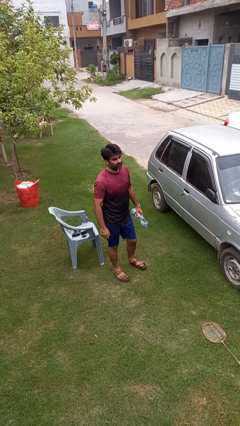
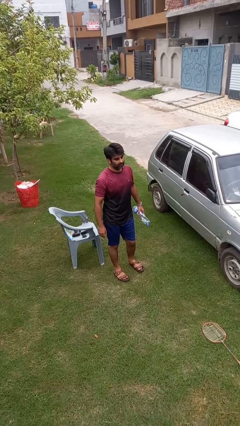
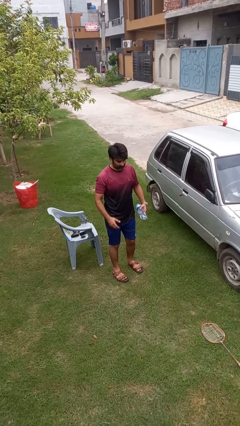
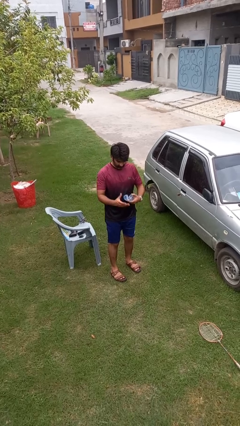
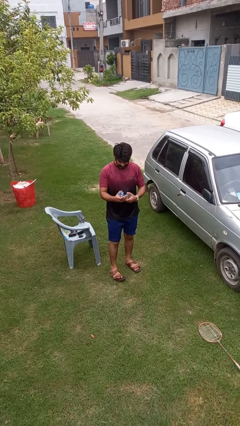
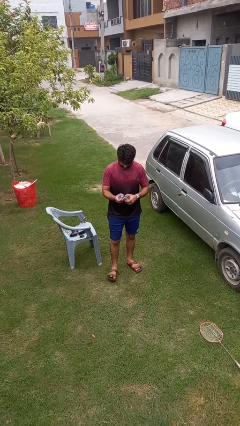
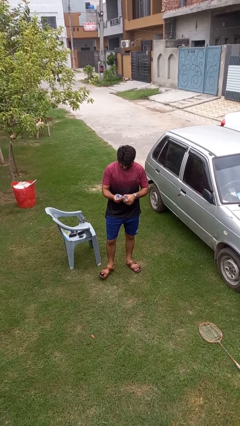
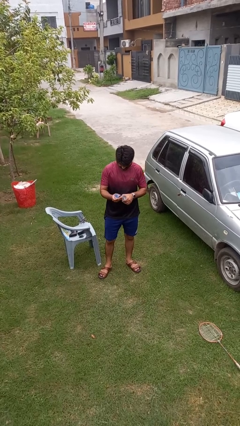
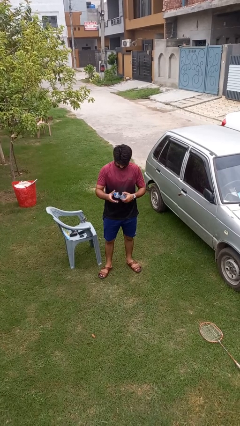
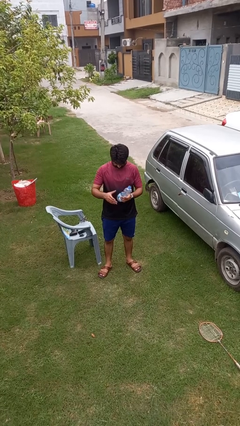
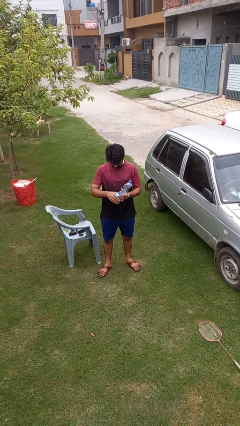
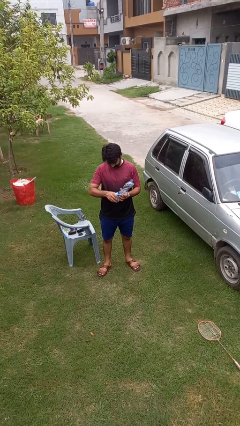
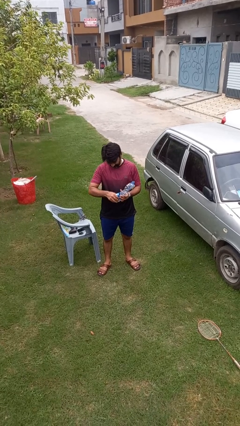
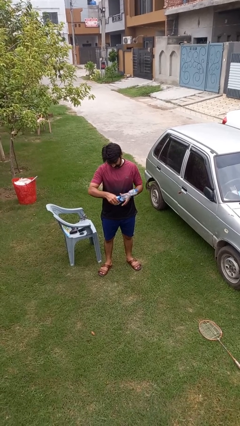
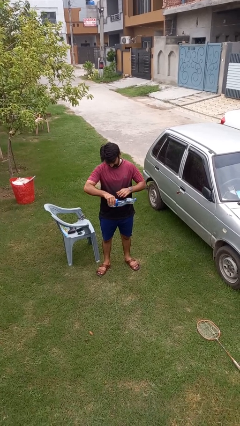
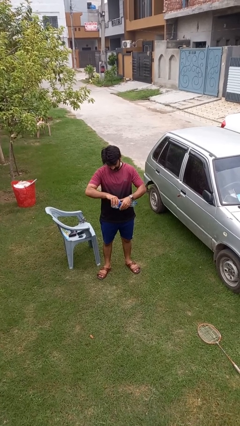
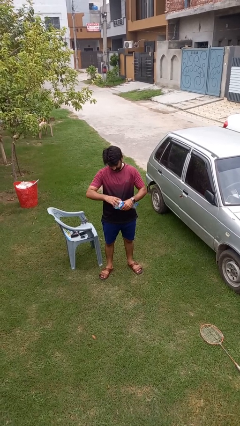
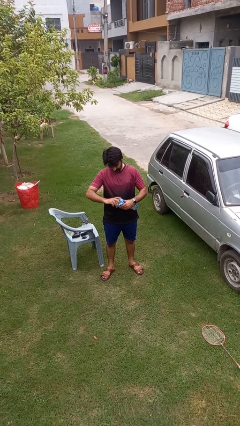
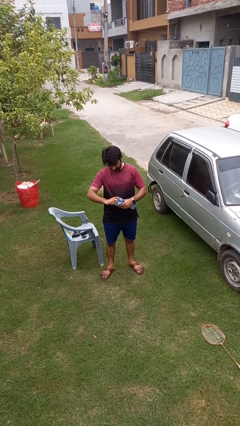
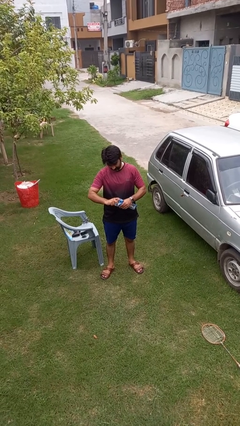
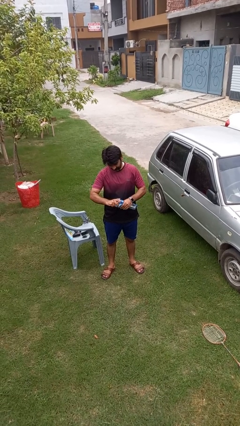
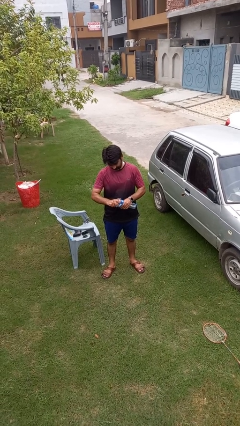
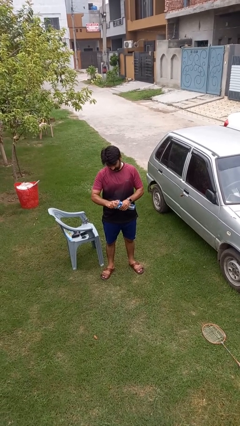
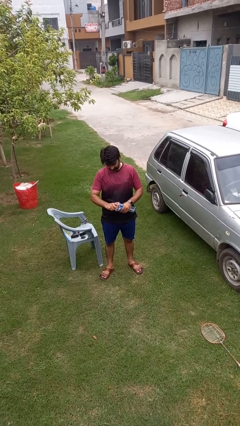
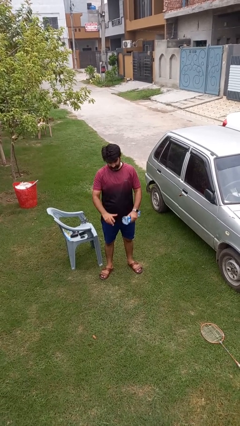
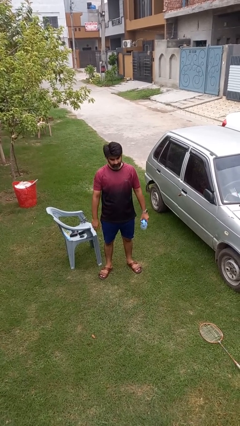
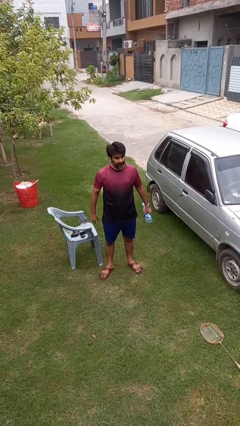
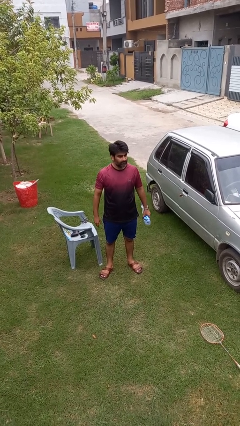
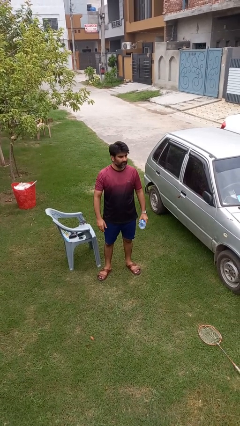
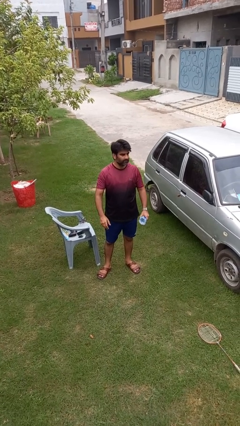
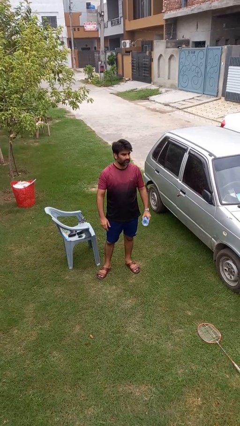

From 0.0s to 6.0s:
person squeezes object

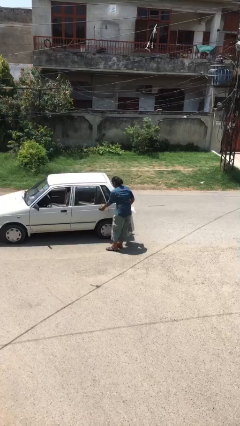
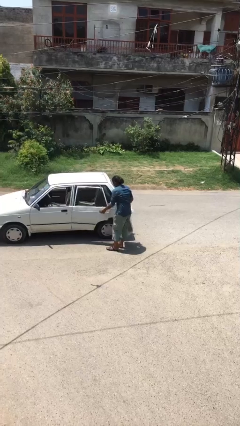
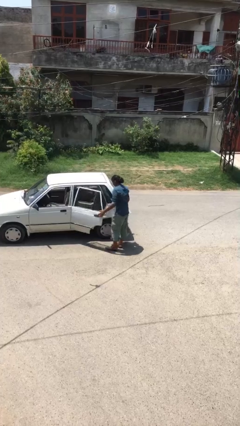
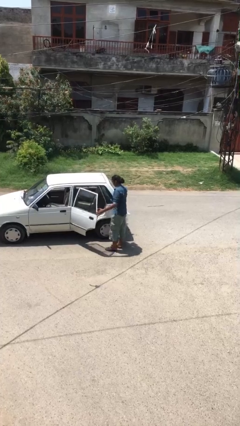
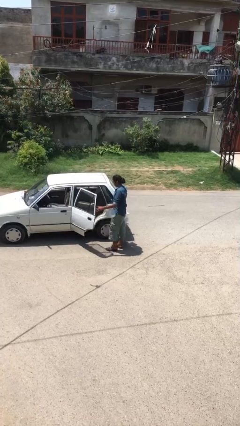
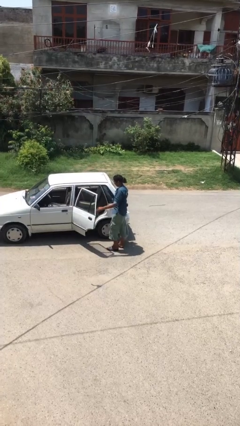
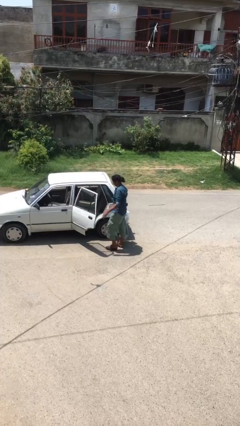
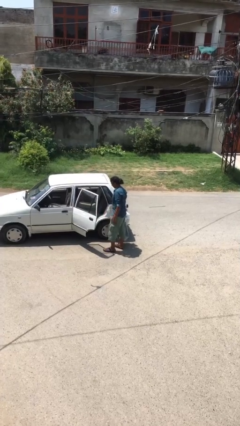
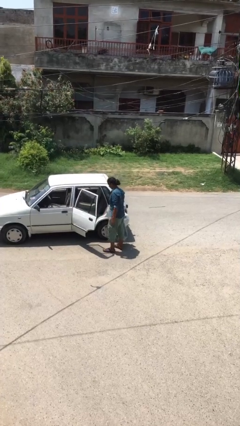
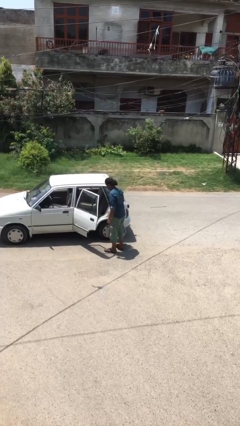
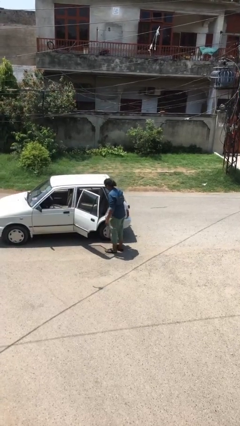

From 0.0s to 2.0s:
person opens car door

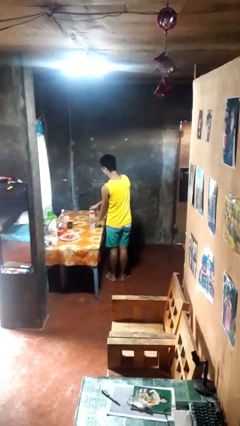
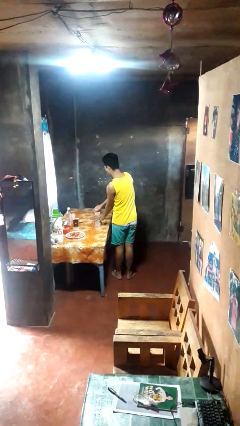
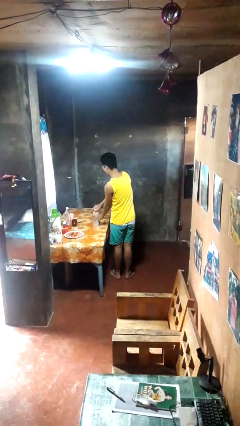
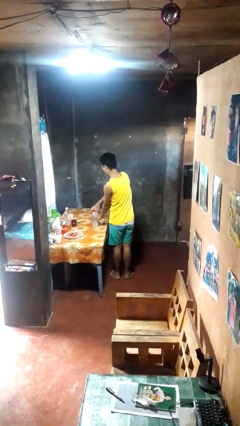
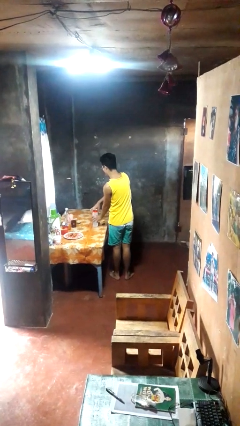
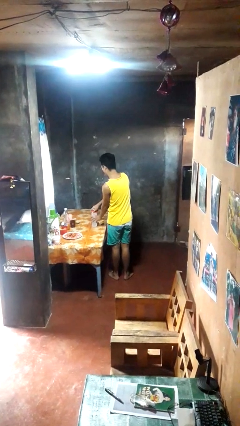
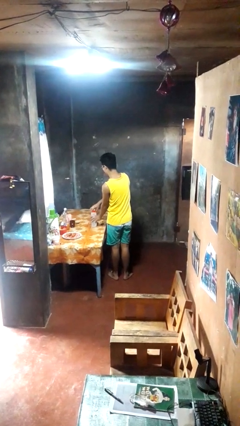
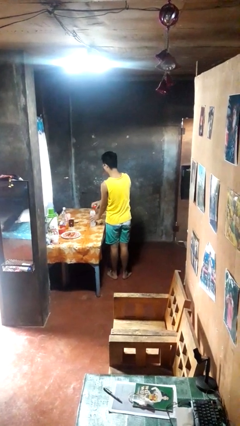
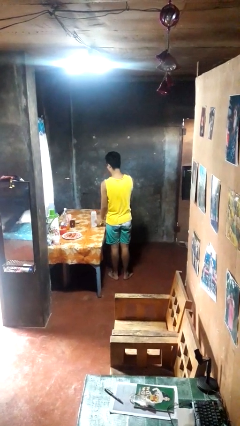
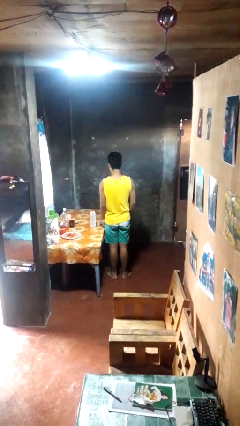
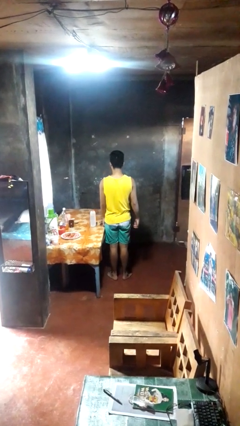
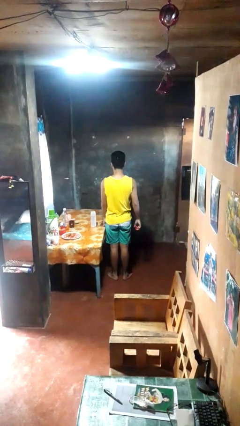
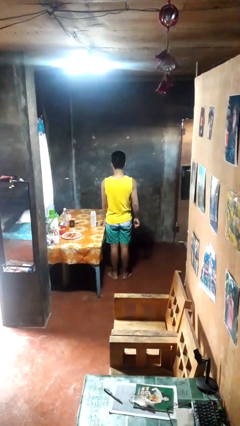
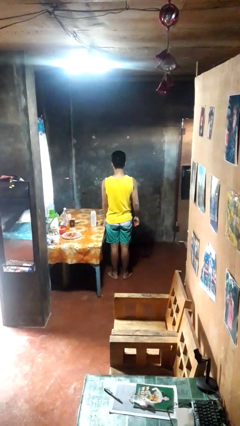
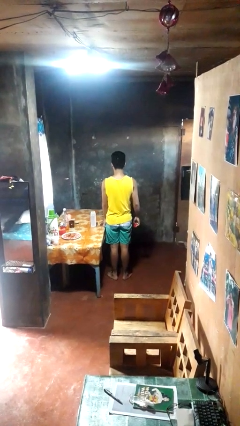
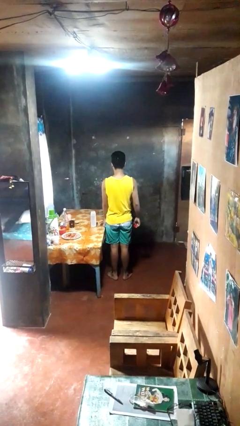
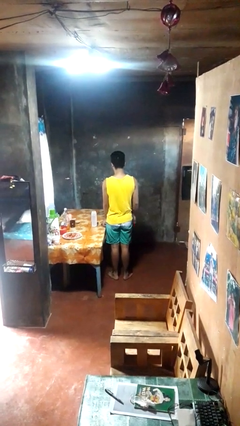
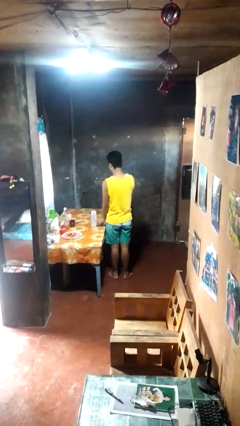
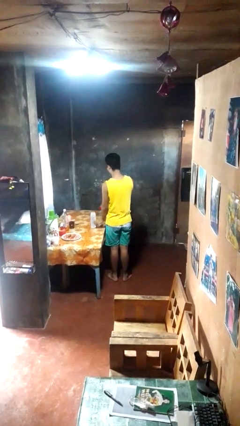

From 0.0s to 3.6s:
person opens jar

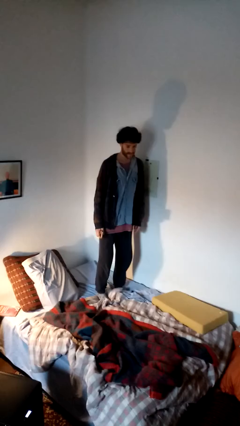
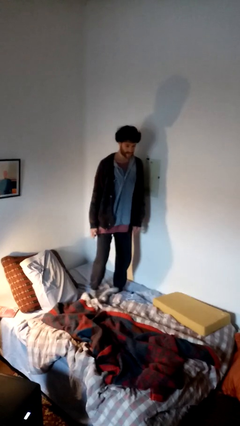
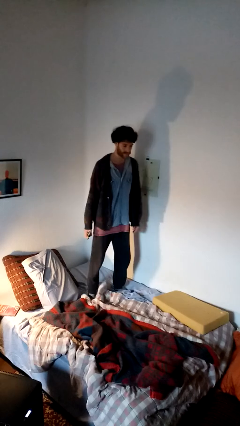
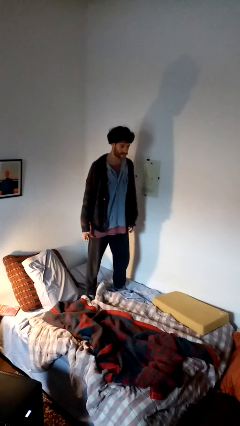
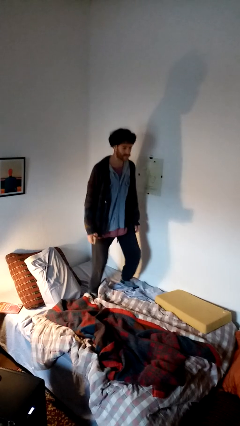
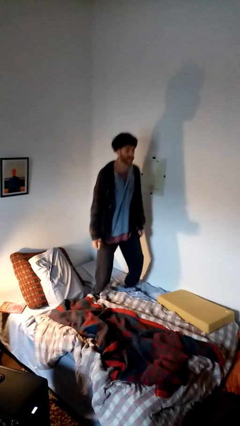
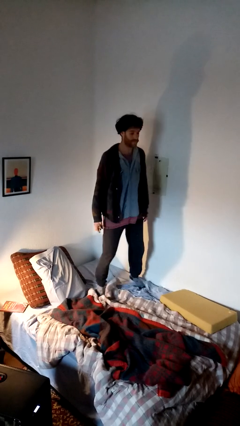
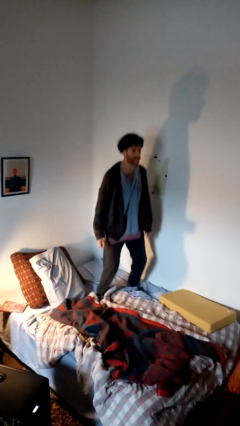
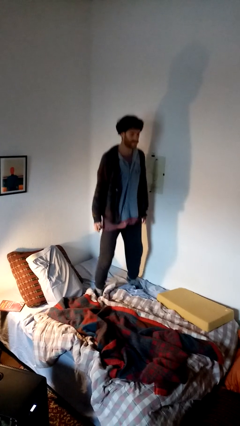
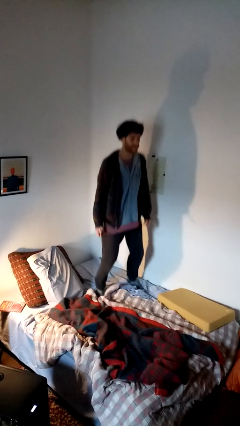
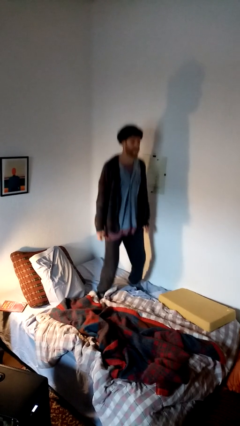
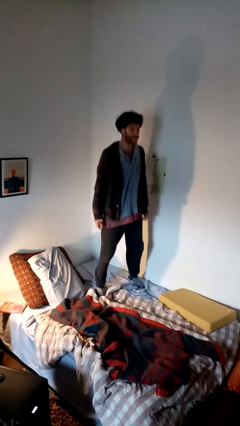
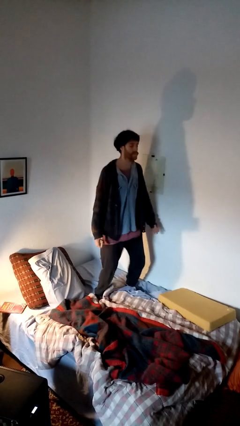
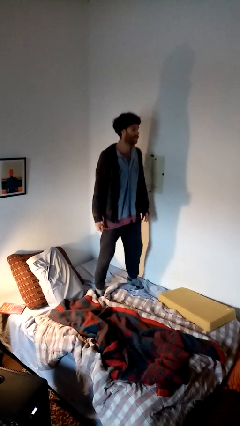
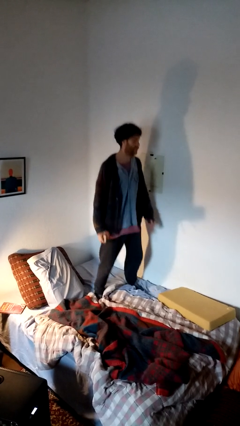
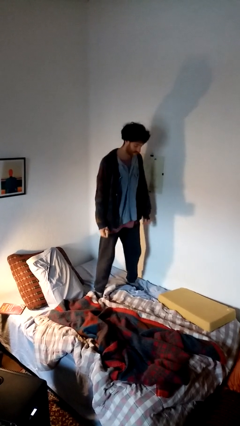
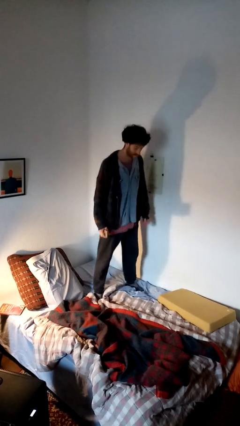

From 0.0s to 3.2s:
person jumps on bed

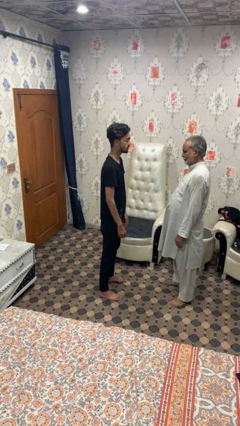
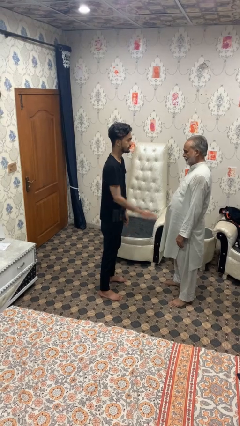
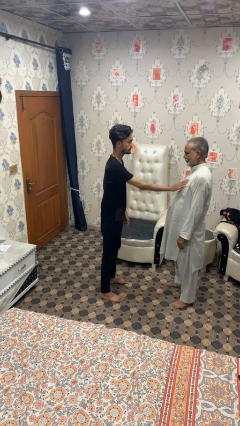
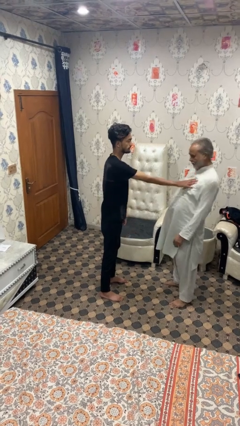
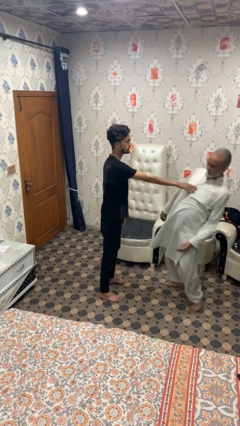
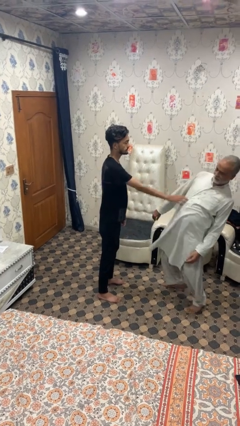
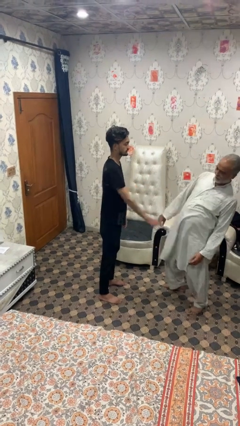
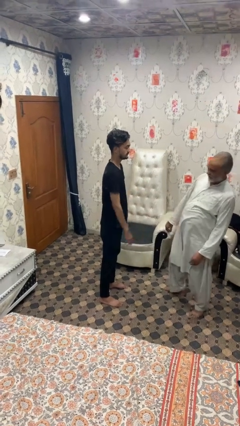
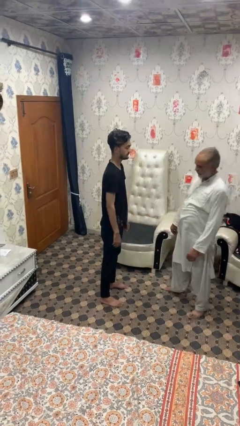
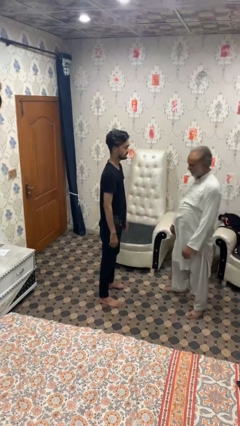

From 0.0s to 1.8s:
person shoves person

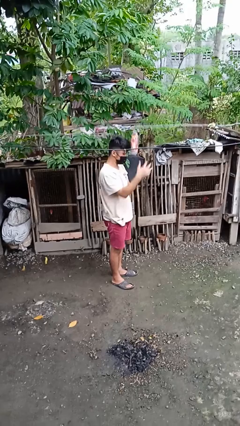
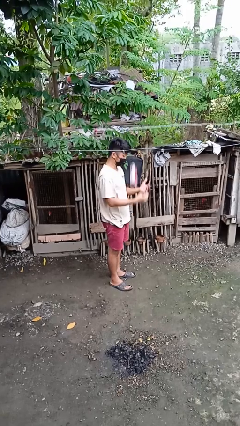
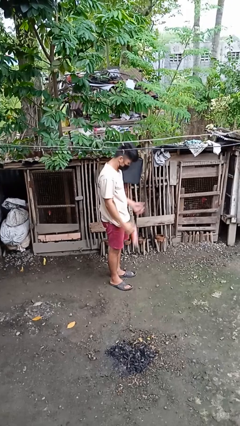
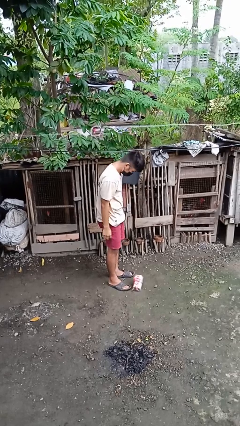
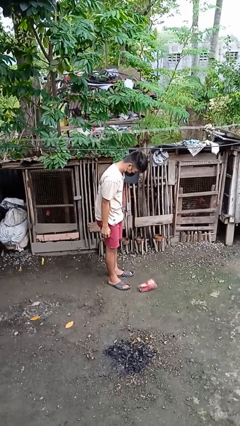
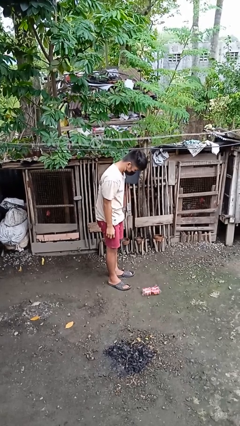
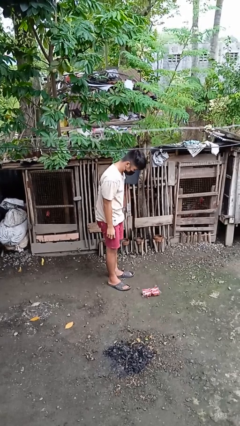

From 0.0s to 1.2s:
person drops object
